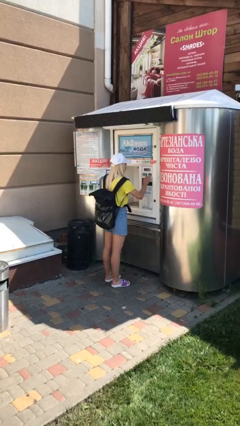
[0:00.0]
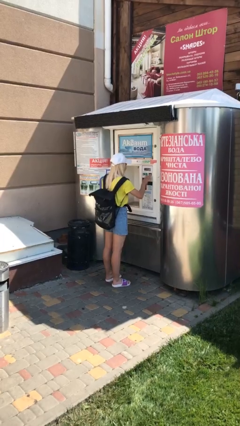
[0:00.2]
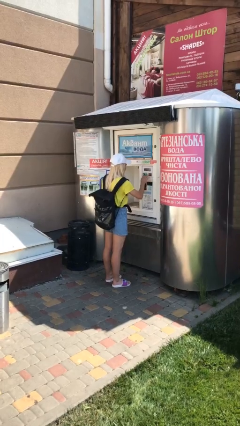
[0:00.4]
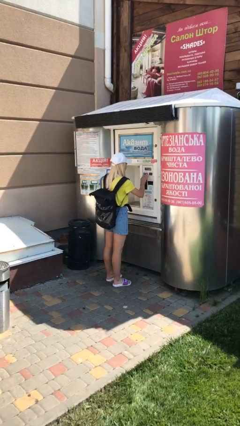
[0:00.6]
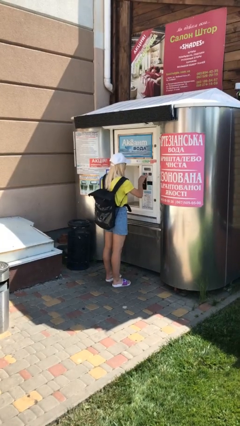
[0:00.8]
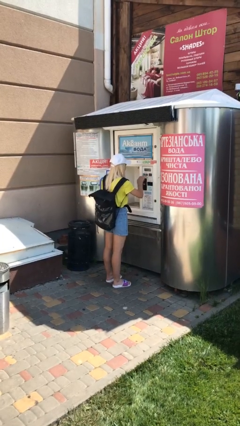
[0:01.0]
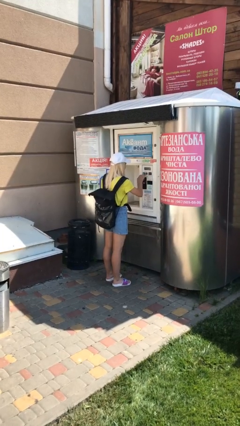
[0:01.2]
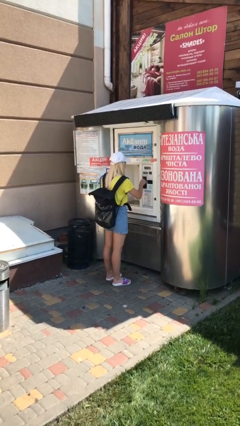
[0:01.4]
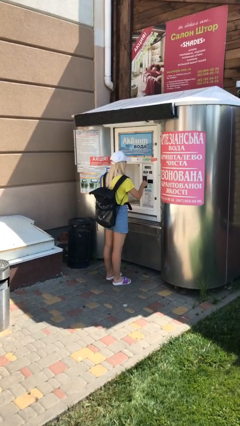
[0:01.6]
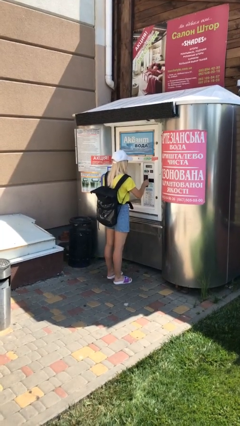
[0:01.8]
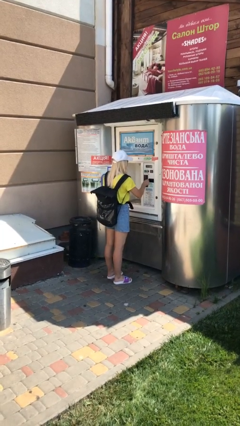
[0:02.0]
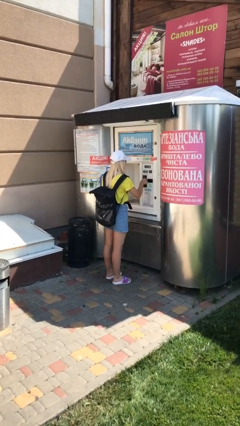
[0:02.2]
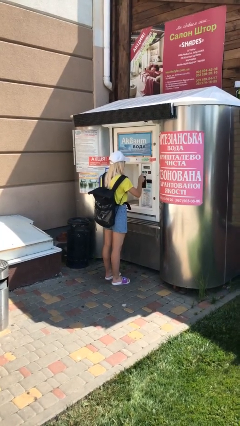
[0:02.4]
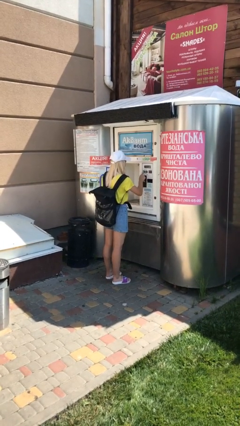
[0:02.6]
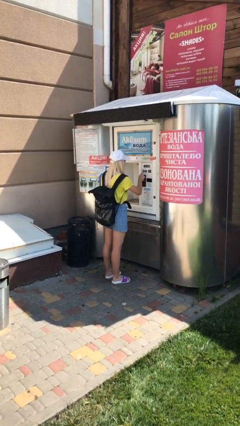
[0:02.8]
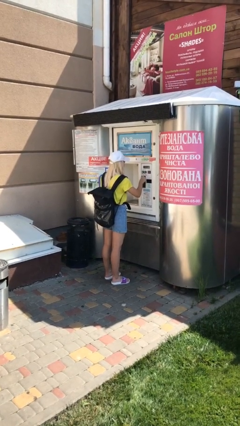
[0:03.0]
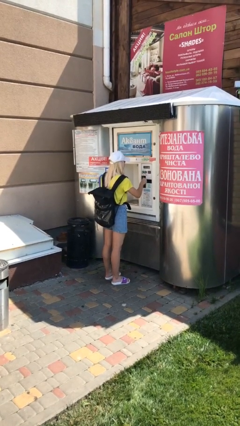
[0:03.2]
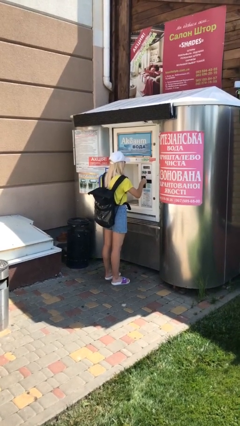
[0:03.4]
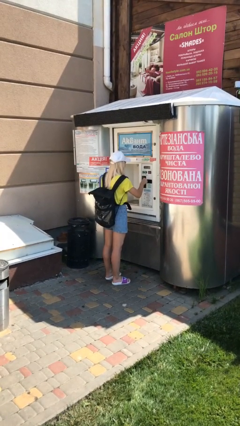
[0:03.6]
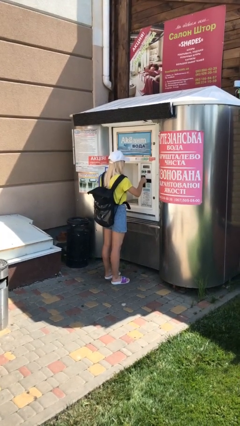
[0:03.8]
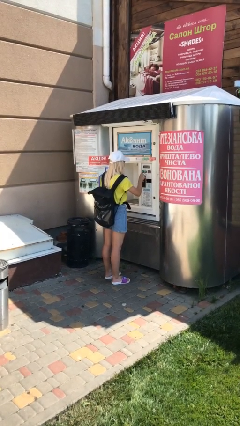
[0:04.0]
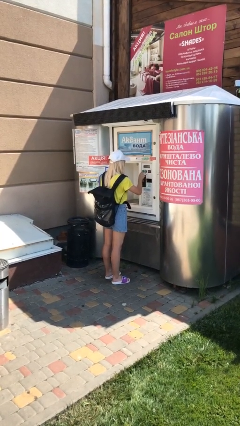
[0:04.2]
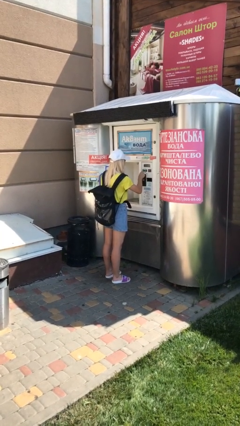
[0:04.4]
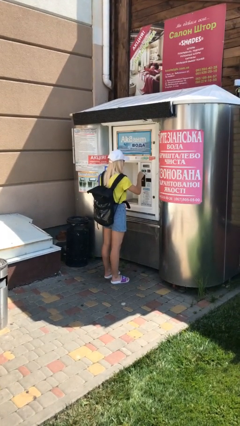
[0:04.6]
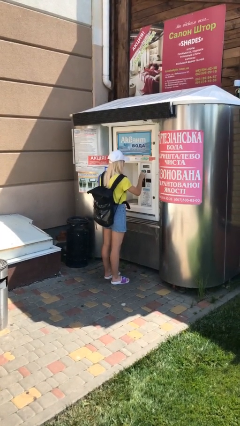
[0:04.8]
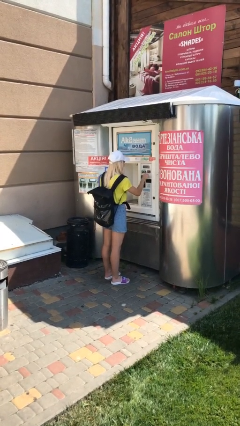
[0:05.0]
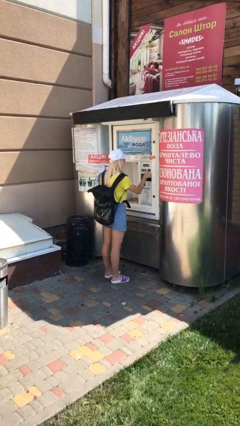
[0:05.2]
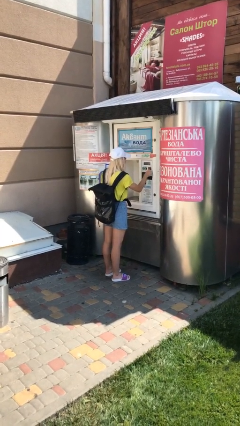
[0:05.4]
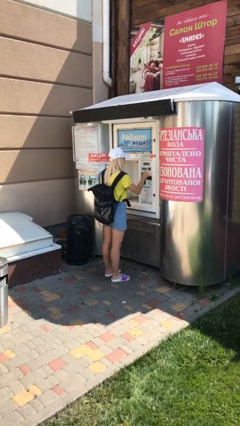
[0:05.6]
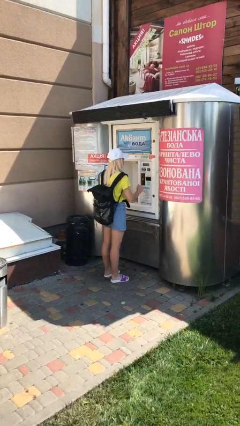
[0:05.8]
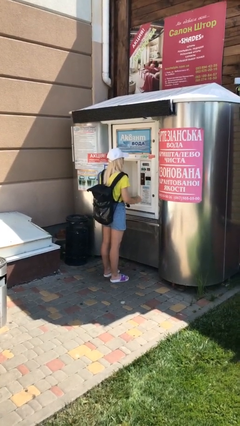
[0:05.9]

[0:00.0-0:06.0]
person purchases from machine

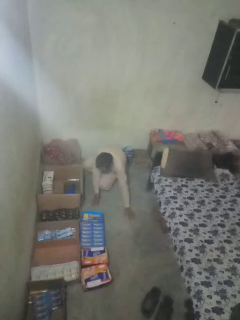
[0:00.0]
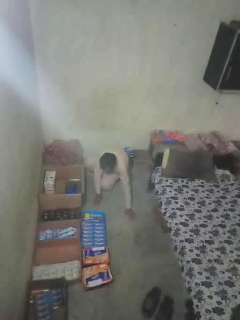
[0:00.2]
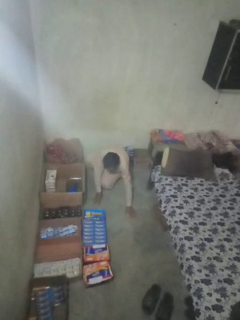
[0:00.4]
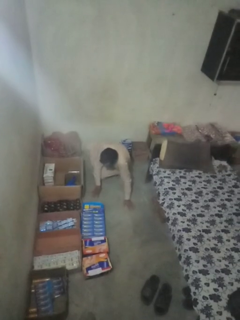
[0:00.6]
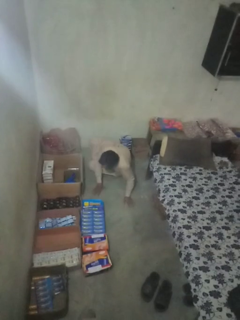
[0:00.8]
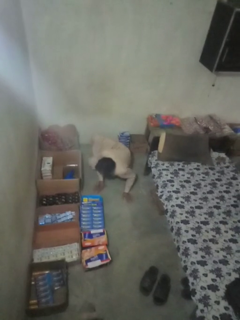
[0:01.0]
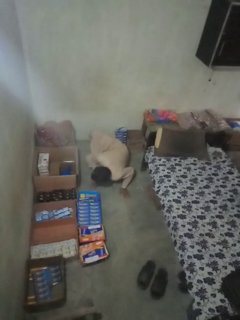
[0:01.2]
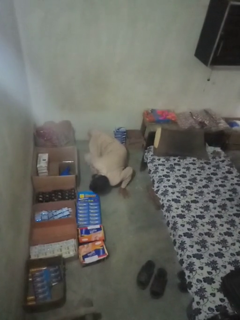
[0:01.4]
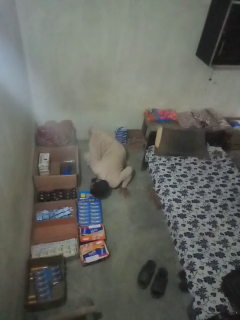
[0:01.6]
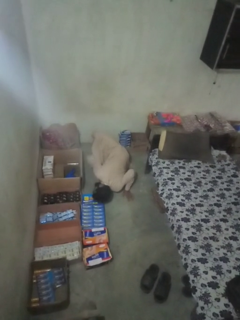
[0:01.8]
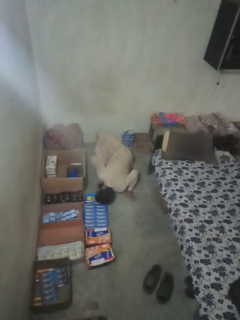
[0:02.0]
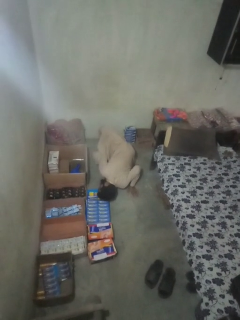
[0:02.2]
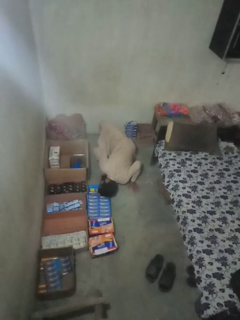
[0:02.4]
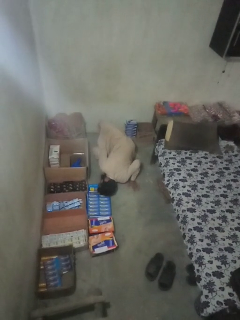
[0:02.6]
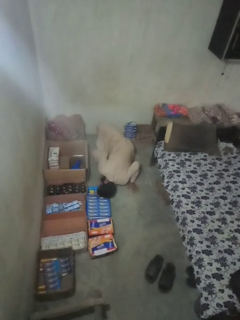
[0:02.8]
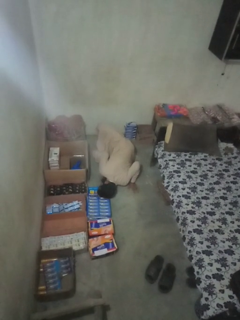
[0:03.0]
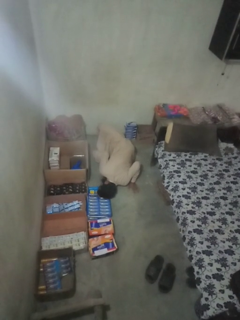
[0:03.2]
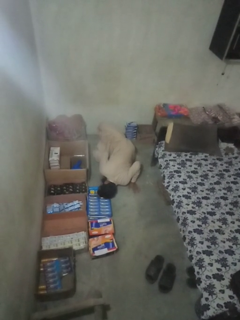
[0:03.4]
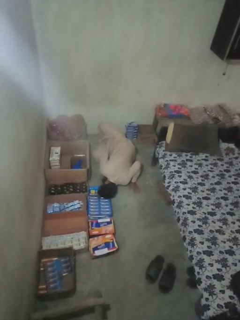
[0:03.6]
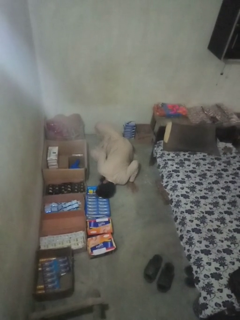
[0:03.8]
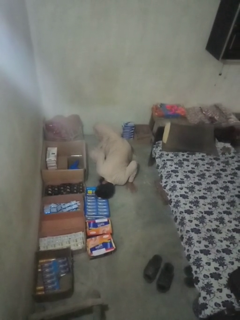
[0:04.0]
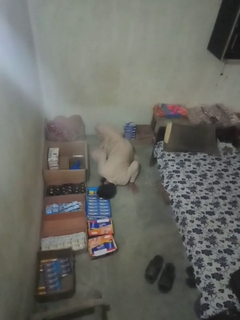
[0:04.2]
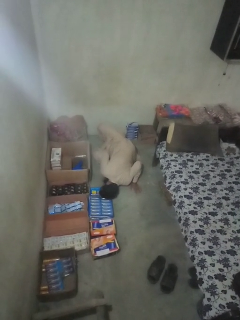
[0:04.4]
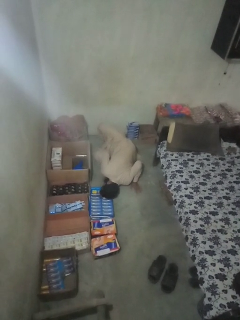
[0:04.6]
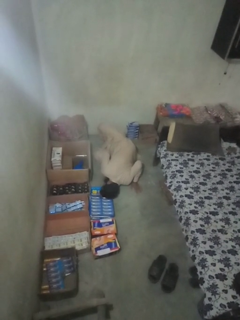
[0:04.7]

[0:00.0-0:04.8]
person lies down on floor

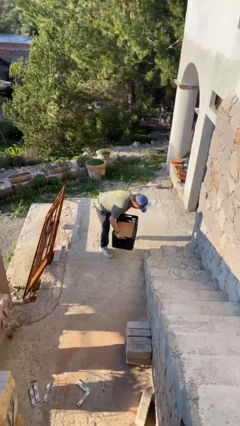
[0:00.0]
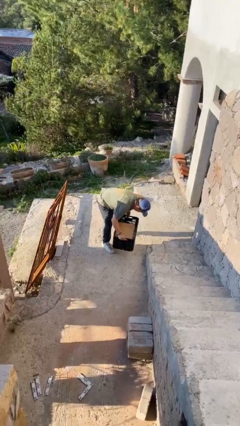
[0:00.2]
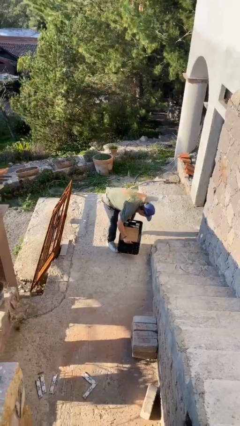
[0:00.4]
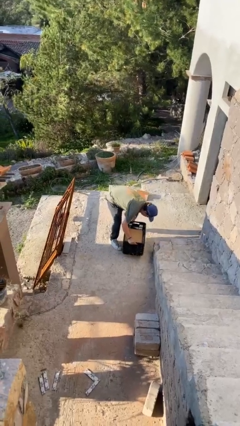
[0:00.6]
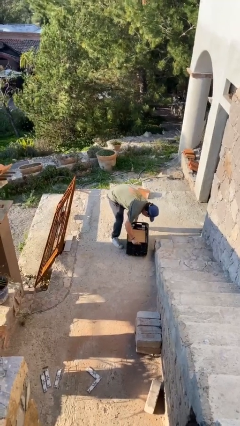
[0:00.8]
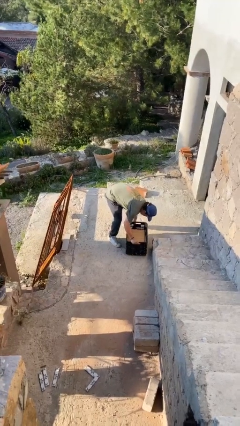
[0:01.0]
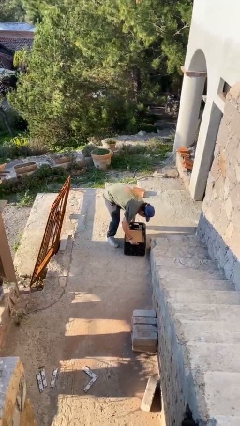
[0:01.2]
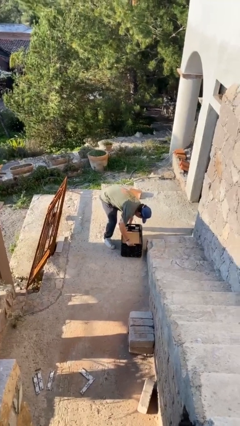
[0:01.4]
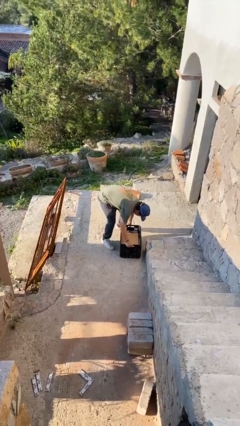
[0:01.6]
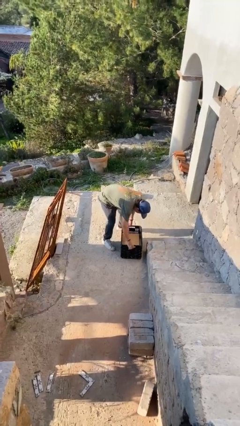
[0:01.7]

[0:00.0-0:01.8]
person puts down object on floor

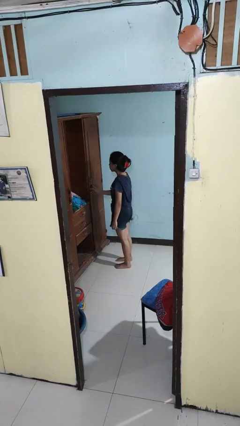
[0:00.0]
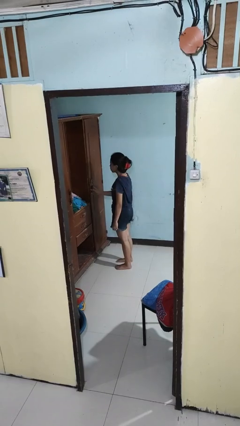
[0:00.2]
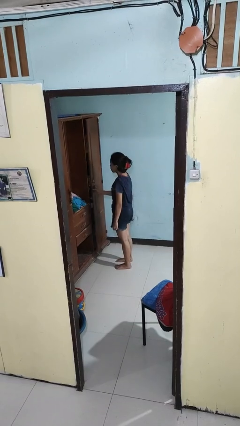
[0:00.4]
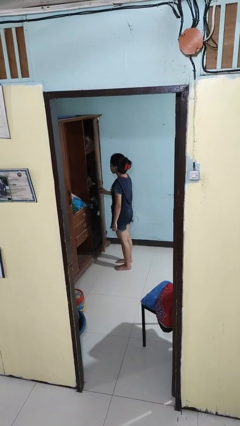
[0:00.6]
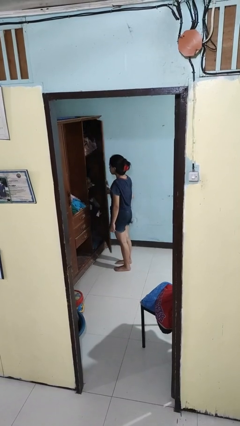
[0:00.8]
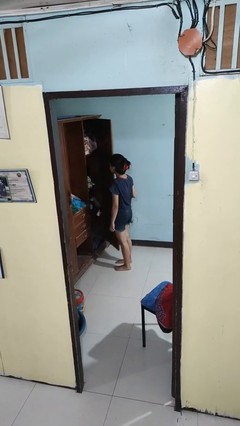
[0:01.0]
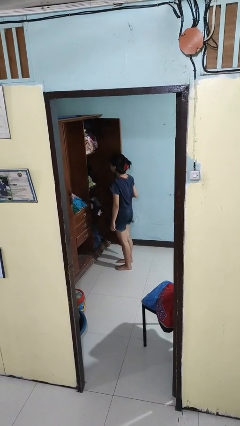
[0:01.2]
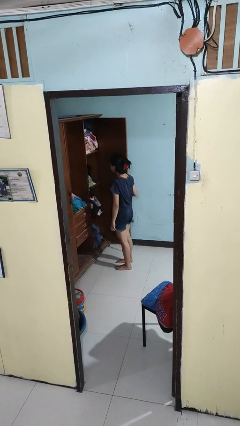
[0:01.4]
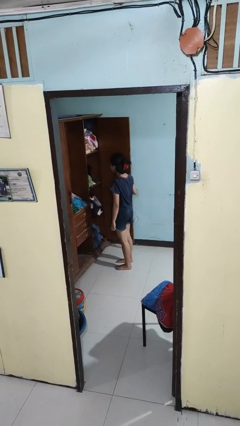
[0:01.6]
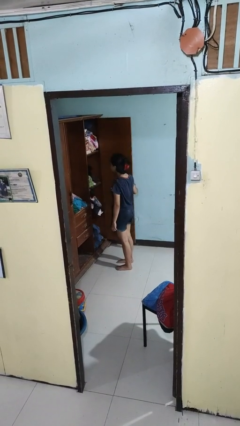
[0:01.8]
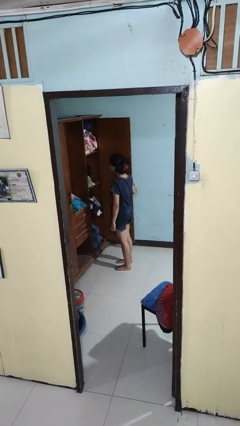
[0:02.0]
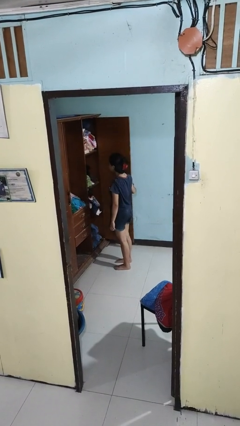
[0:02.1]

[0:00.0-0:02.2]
person opens closet door

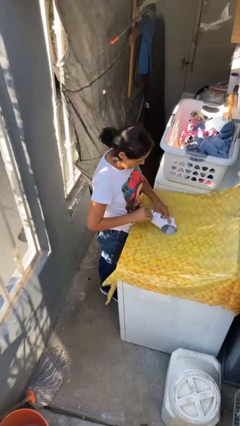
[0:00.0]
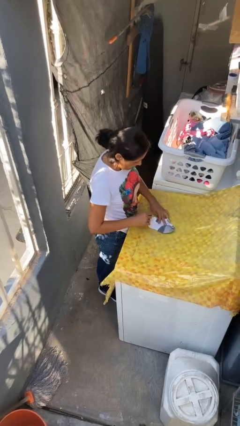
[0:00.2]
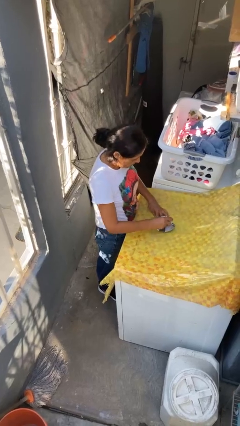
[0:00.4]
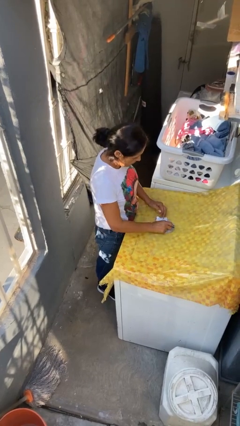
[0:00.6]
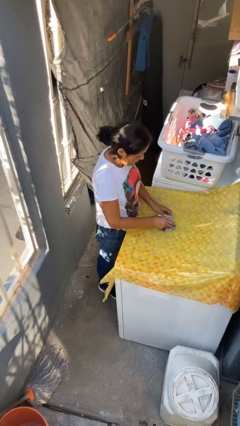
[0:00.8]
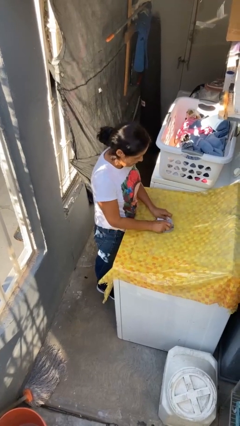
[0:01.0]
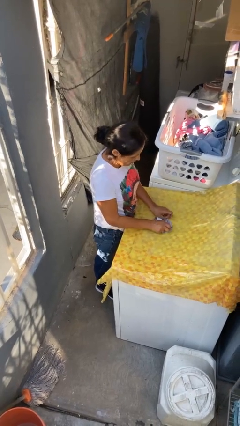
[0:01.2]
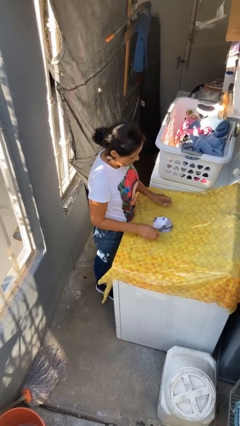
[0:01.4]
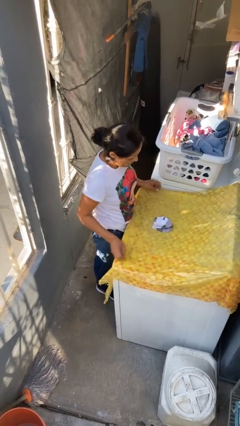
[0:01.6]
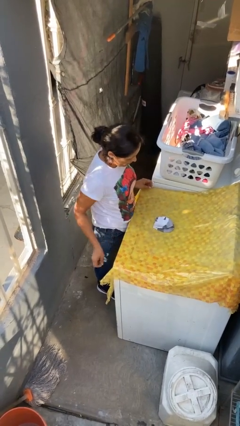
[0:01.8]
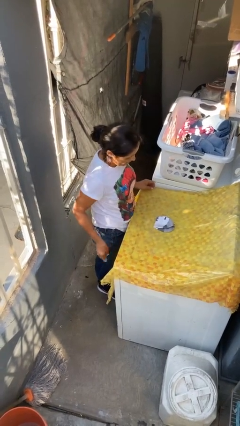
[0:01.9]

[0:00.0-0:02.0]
person folds socks

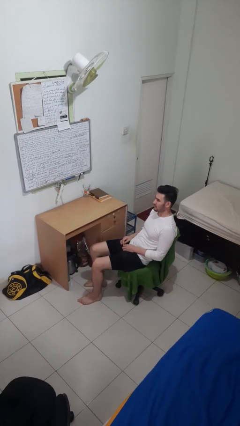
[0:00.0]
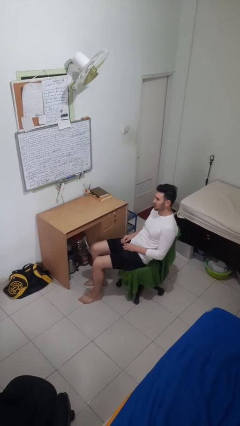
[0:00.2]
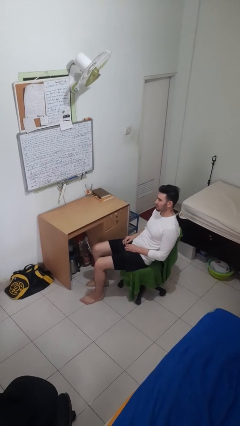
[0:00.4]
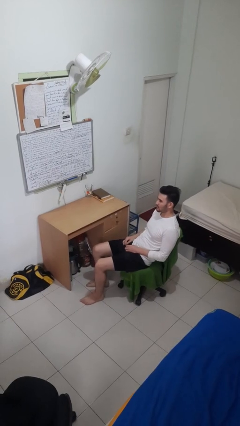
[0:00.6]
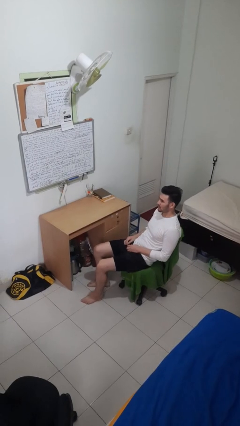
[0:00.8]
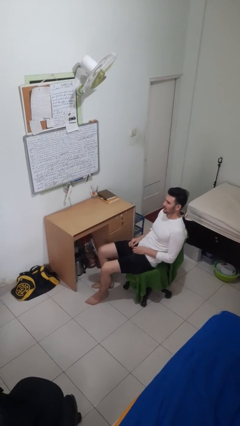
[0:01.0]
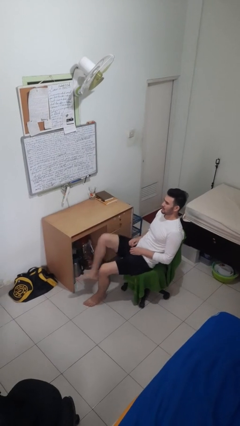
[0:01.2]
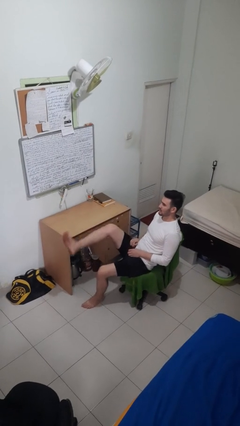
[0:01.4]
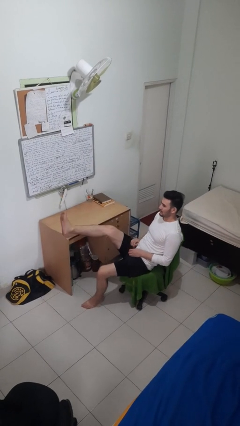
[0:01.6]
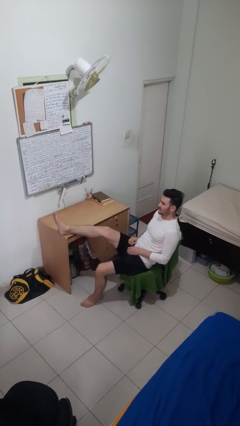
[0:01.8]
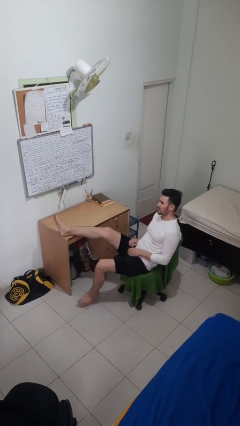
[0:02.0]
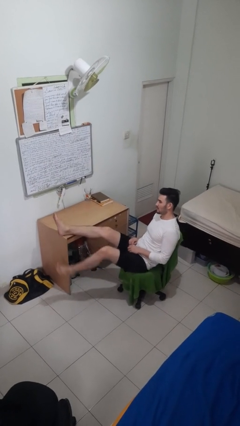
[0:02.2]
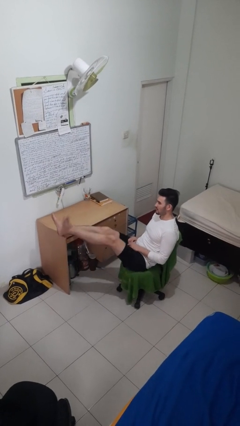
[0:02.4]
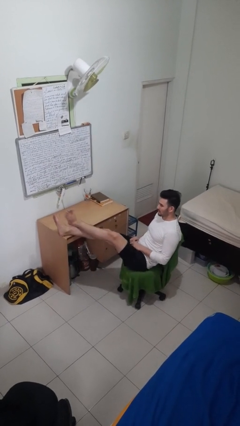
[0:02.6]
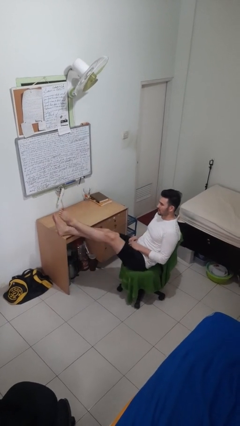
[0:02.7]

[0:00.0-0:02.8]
person puts feet up
